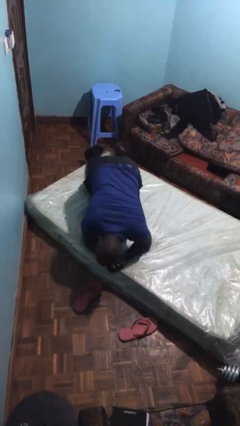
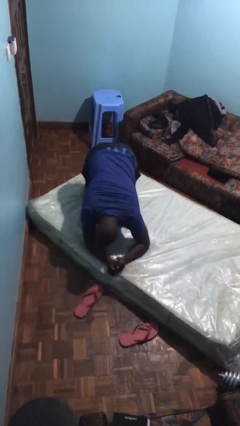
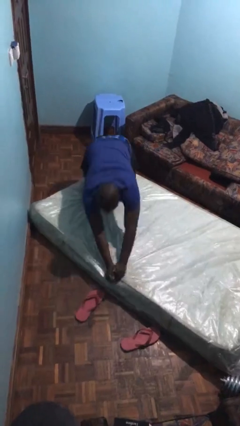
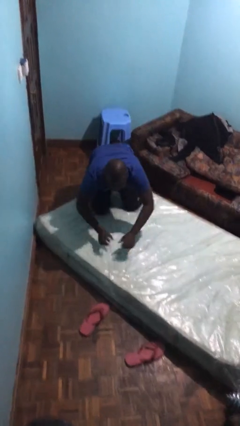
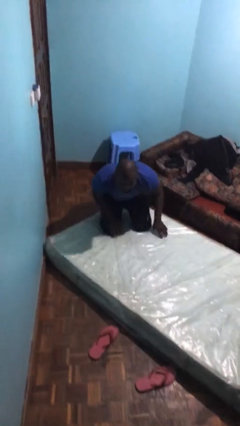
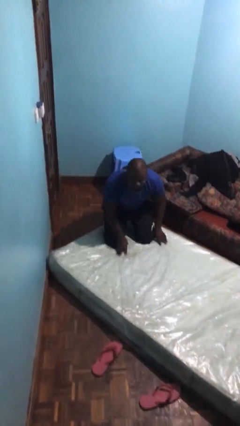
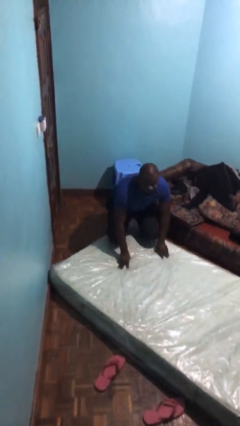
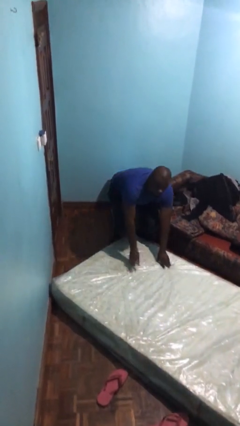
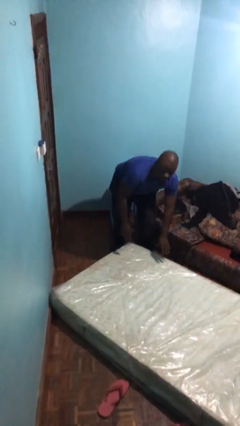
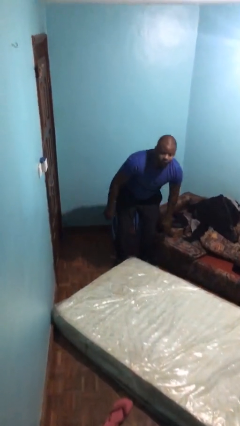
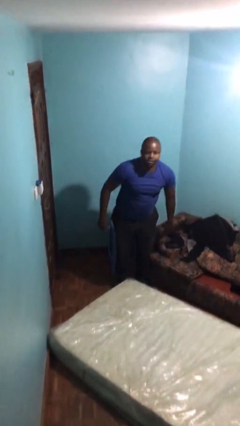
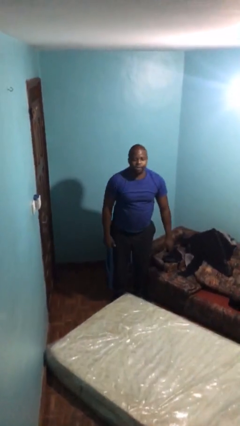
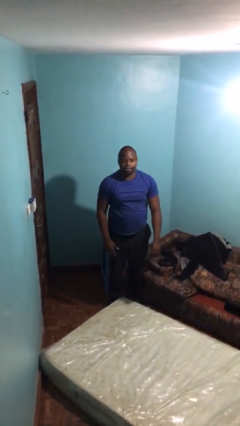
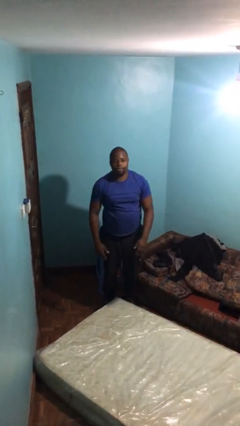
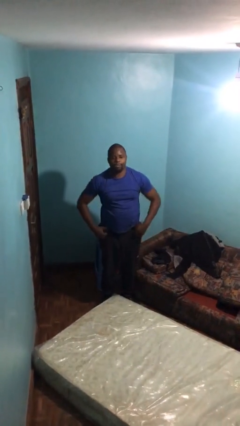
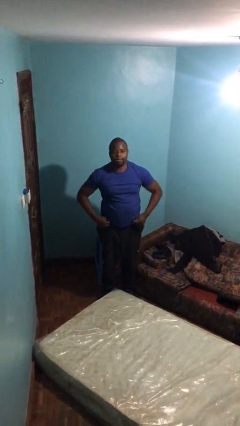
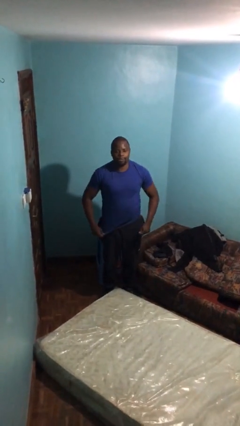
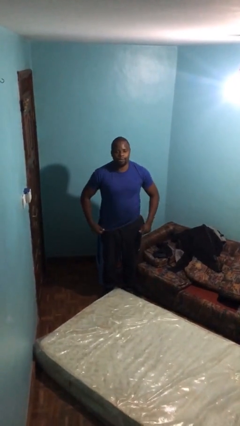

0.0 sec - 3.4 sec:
person stands up

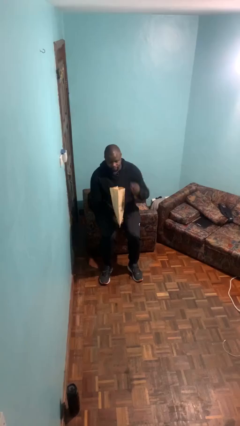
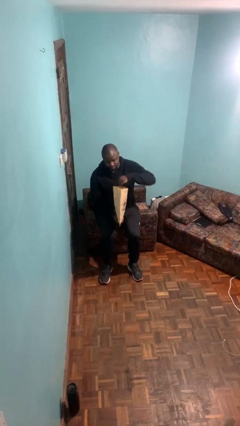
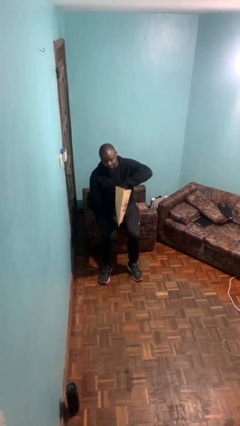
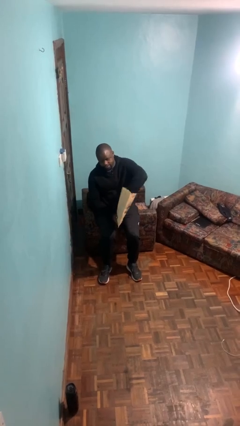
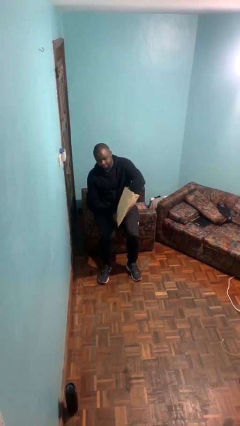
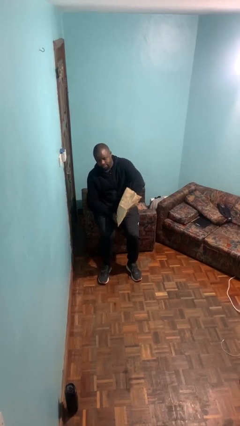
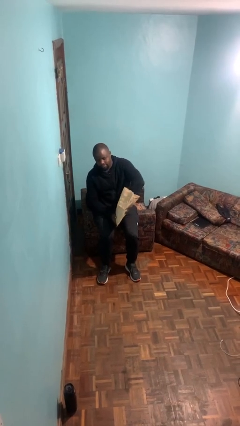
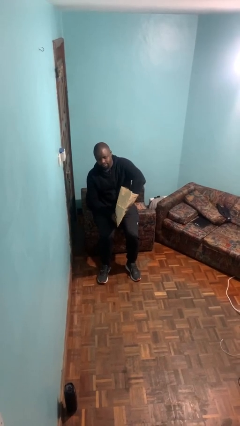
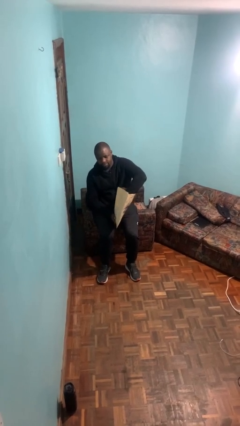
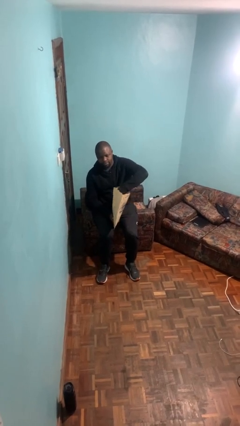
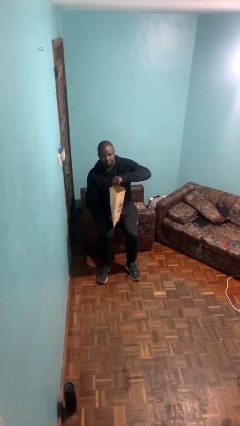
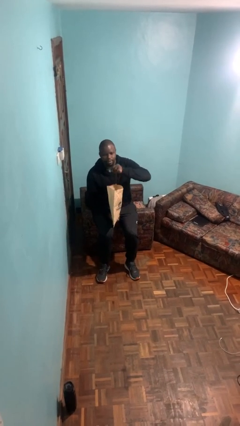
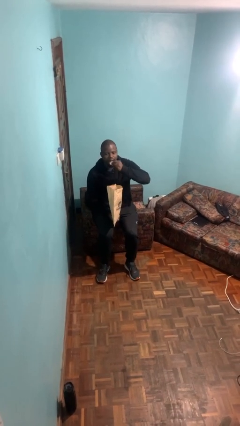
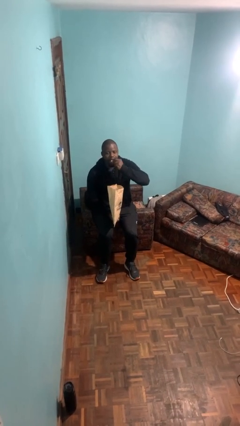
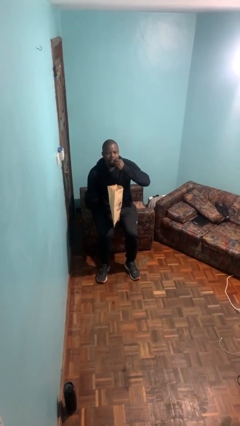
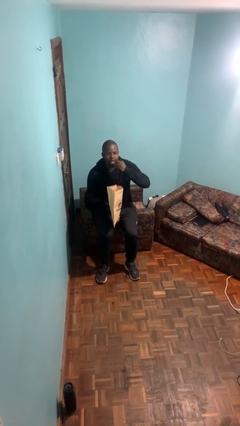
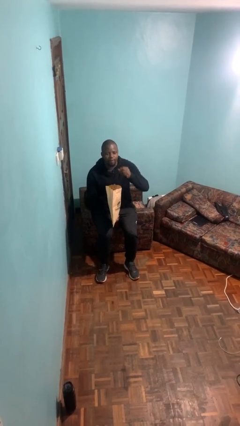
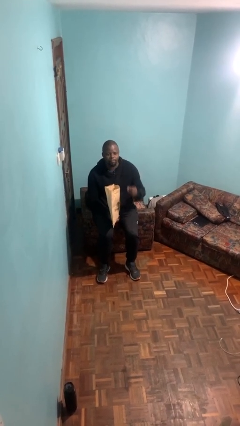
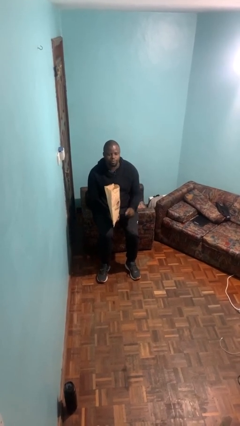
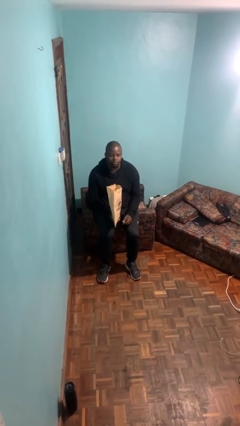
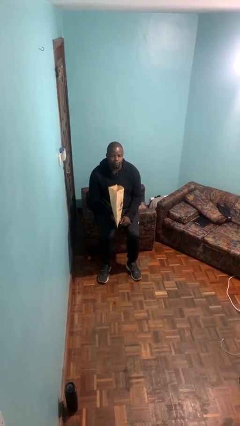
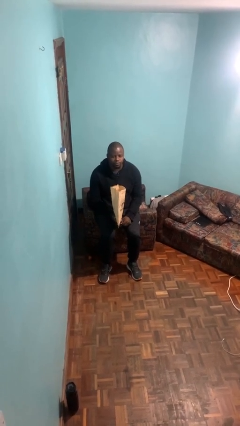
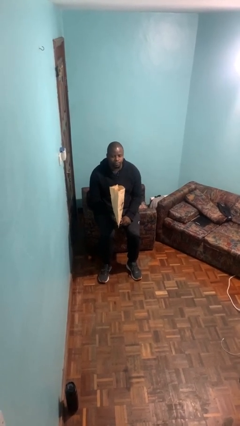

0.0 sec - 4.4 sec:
person eats snack from bag

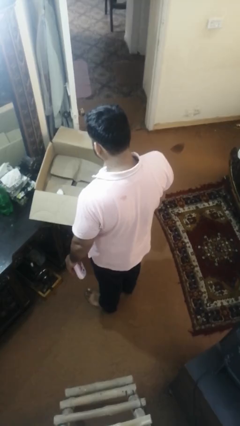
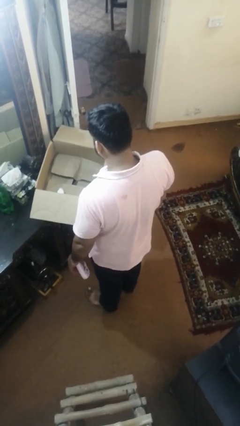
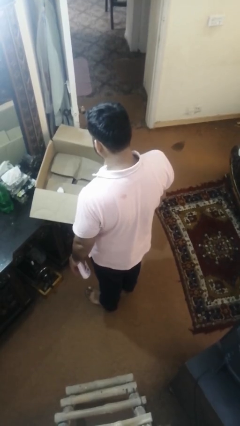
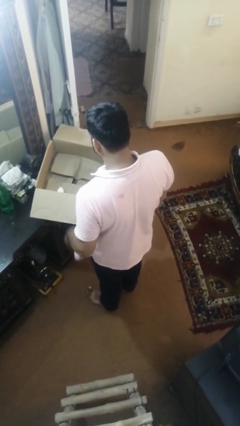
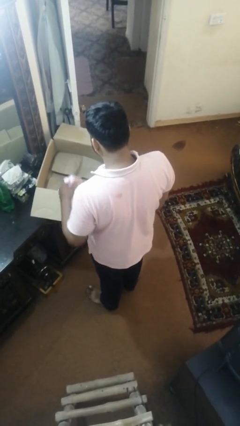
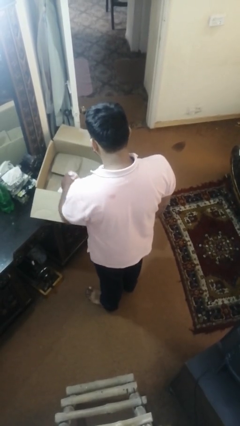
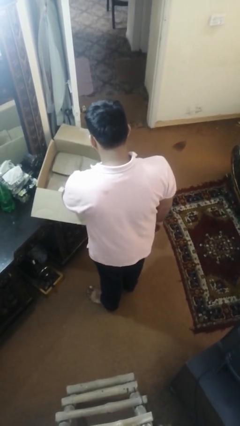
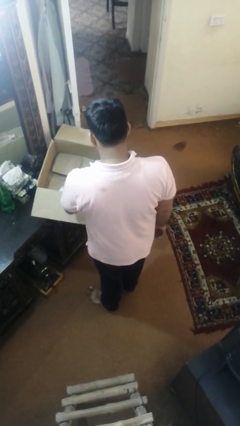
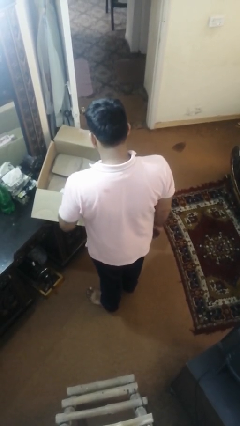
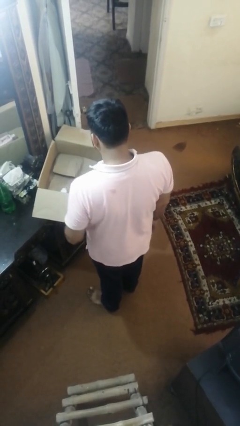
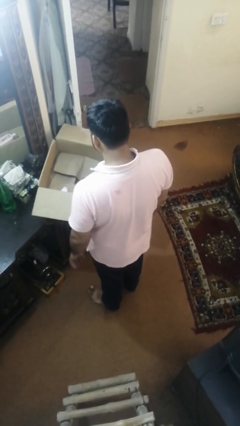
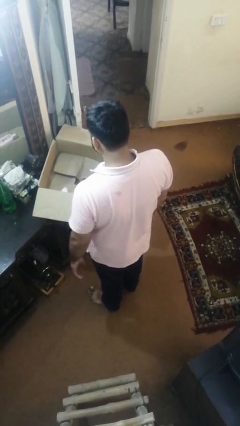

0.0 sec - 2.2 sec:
person puts object into box

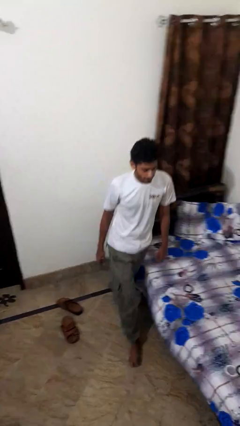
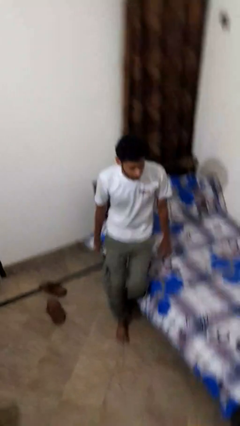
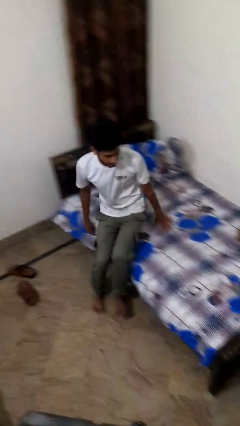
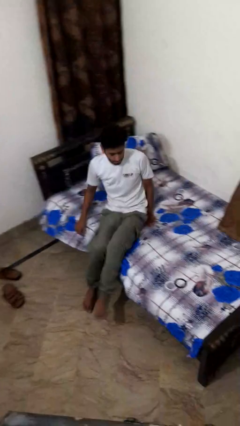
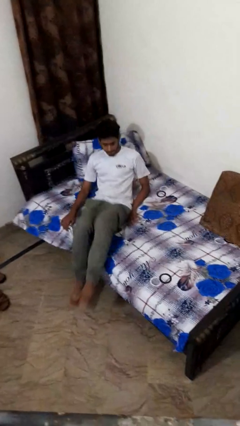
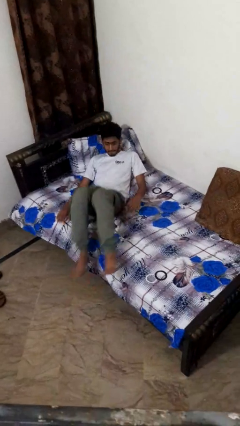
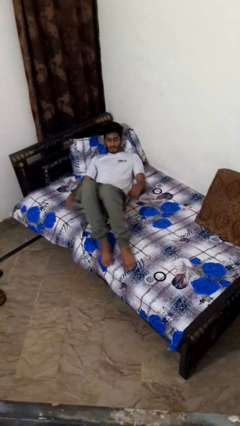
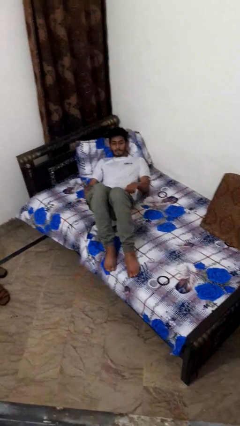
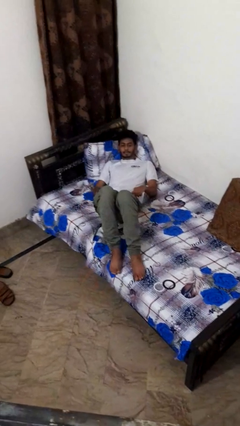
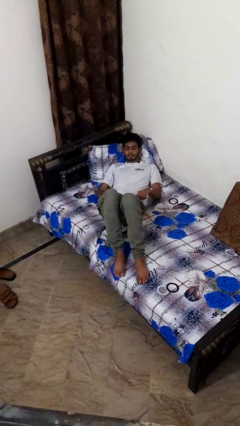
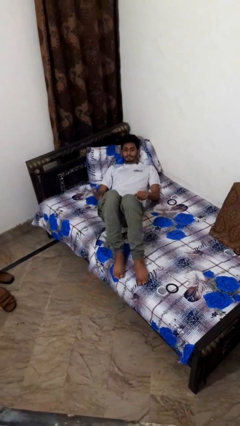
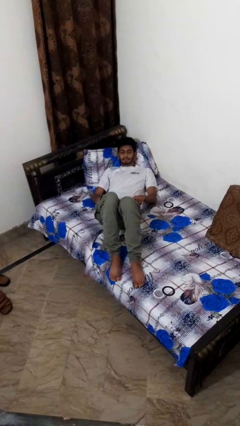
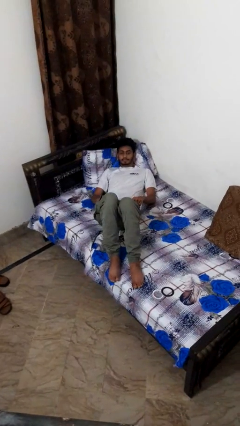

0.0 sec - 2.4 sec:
person lies down on bed

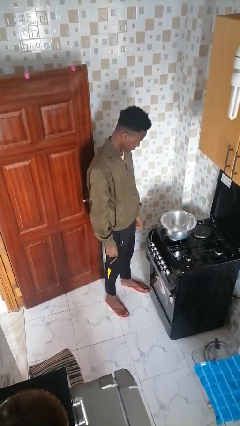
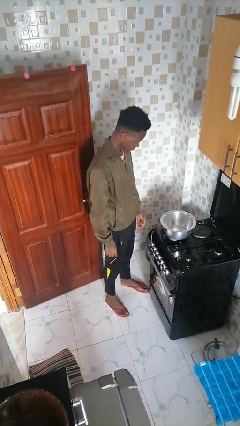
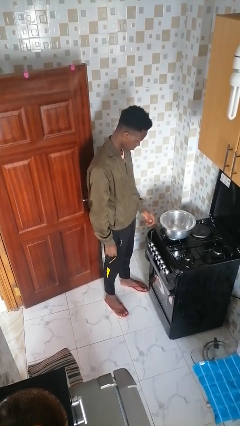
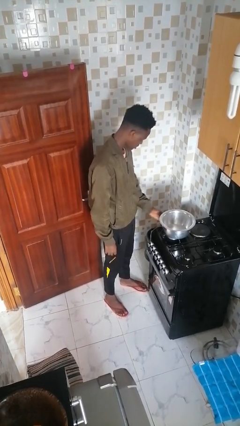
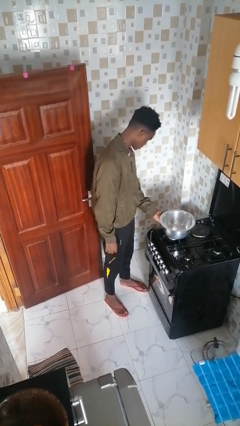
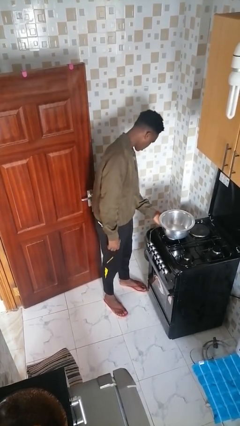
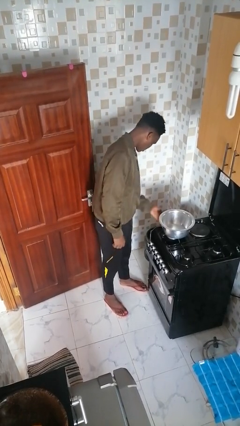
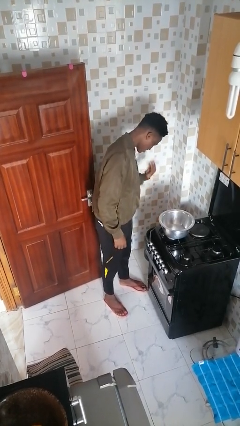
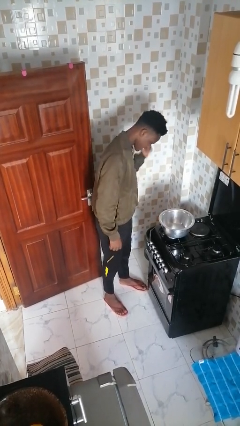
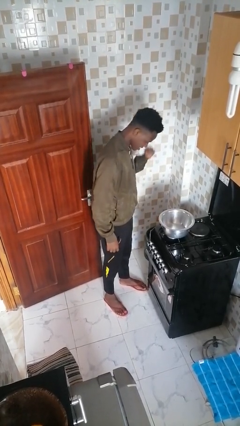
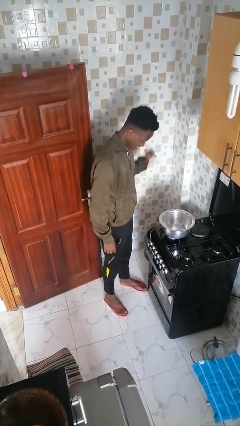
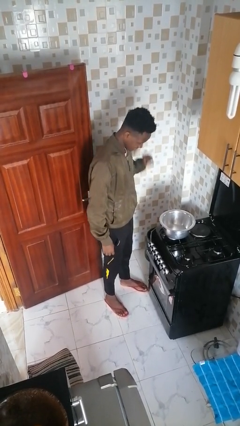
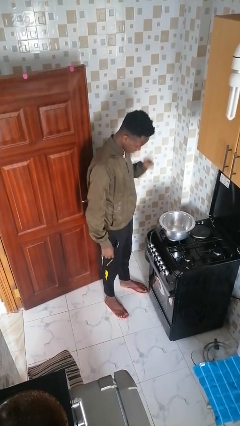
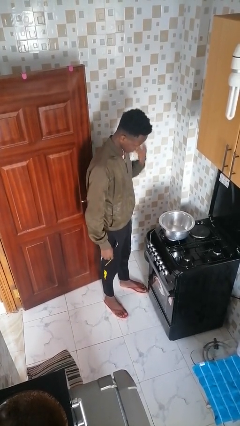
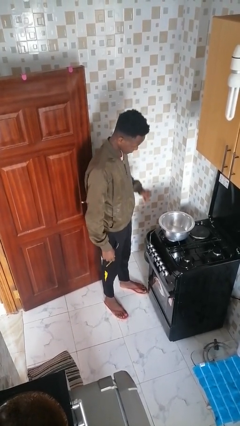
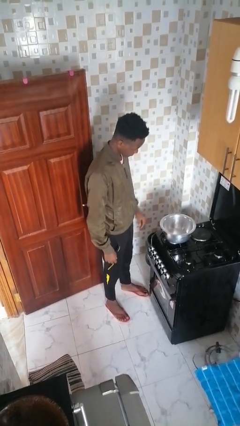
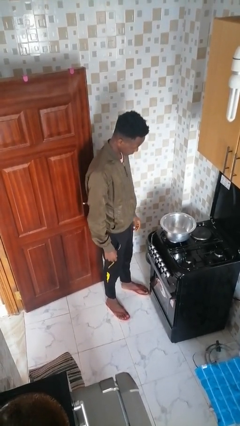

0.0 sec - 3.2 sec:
person burns hand

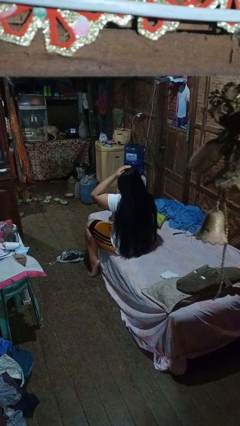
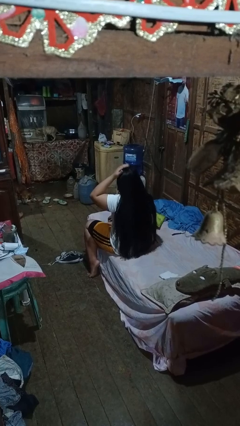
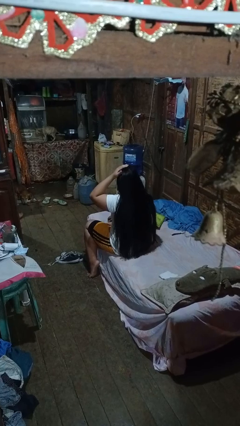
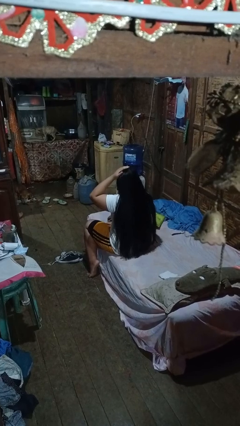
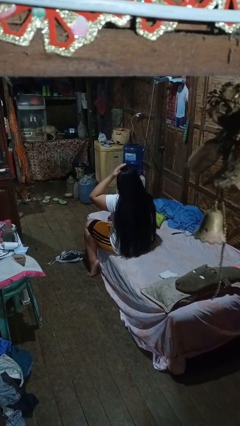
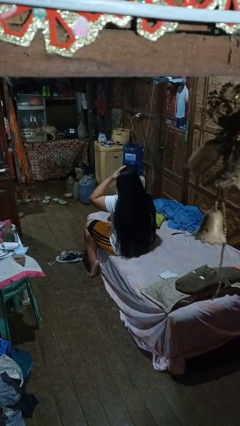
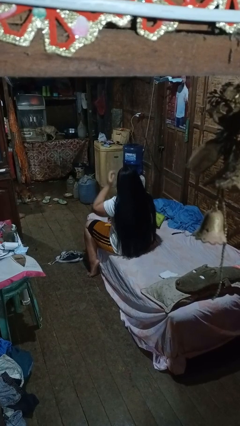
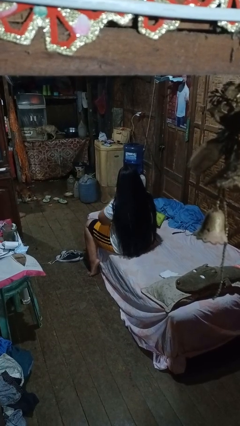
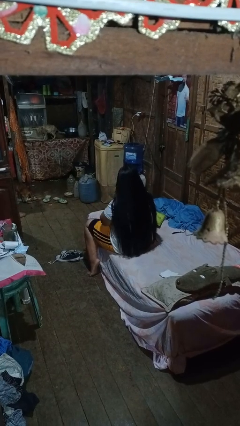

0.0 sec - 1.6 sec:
person pats head

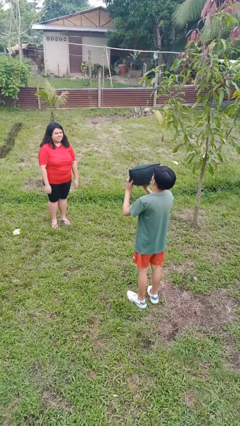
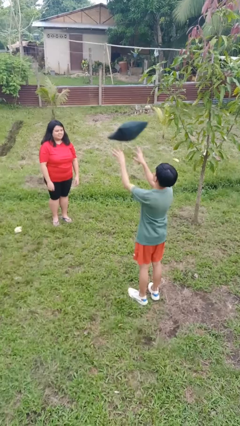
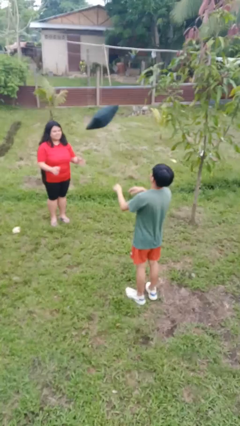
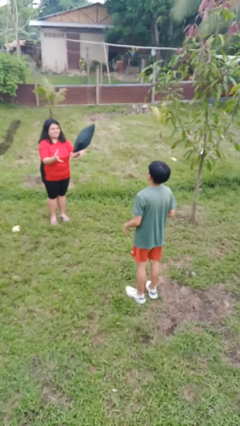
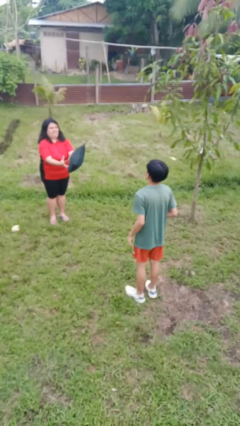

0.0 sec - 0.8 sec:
person catches object from person
